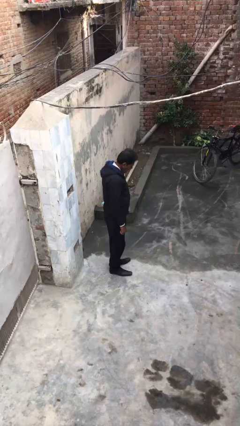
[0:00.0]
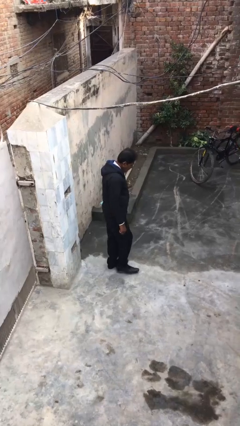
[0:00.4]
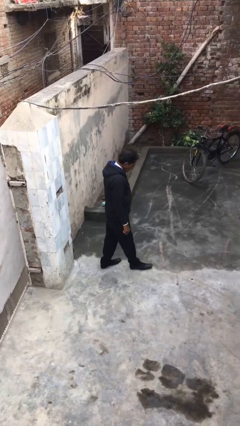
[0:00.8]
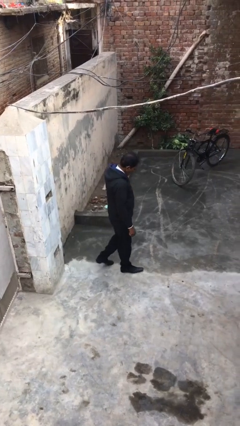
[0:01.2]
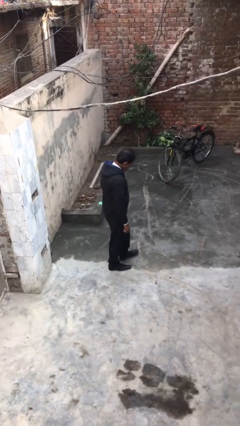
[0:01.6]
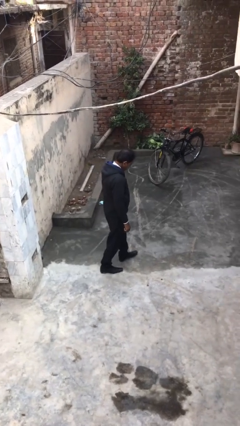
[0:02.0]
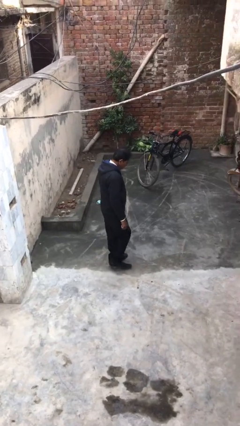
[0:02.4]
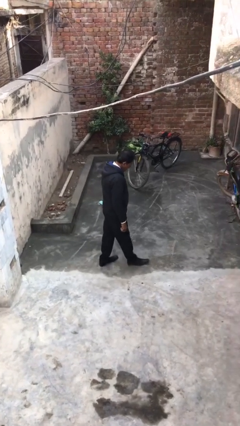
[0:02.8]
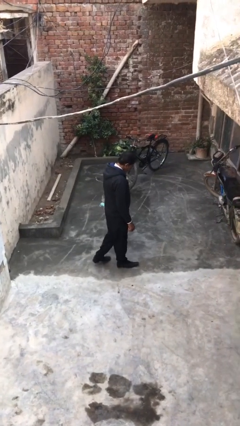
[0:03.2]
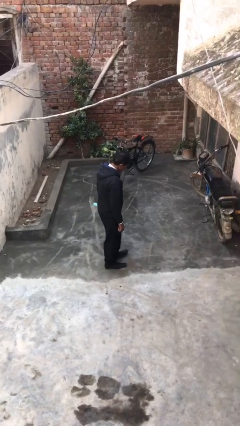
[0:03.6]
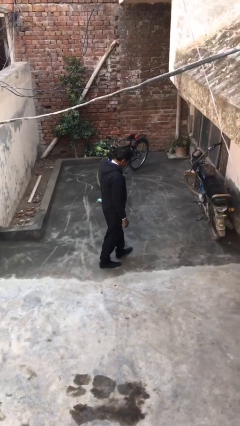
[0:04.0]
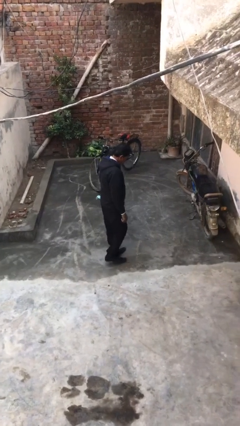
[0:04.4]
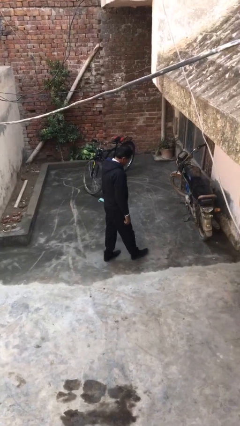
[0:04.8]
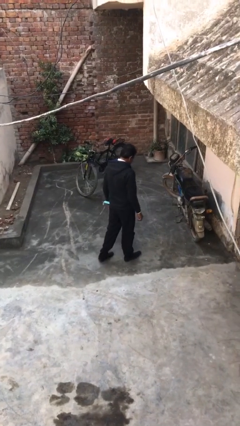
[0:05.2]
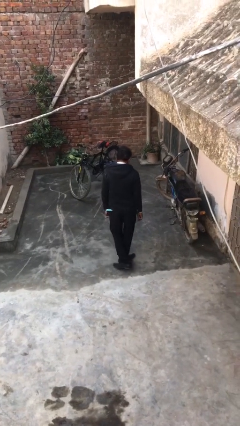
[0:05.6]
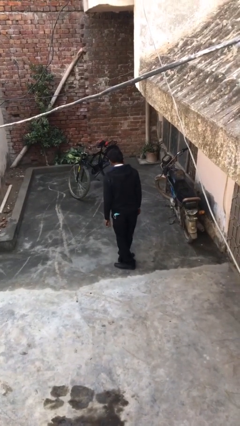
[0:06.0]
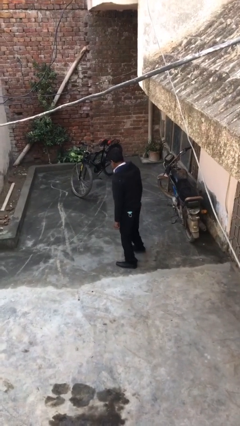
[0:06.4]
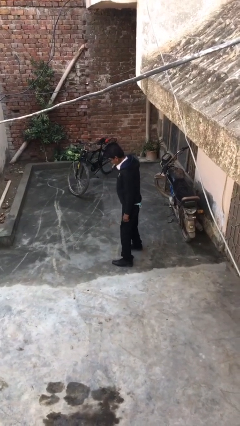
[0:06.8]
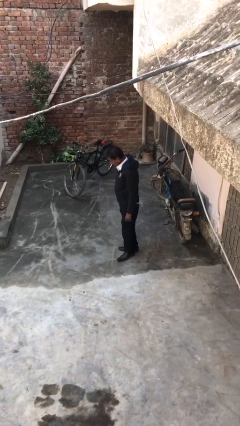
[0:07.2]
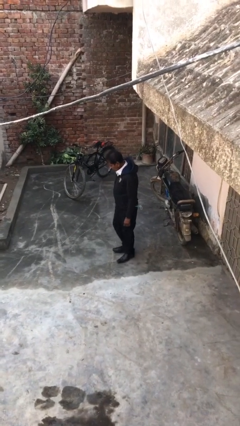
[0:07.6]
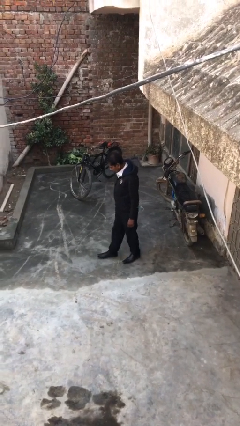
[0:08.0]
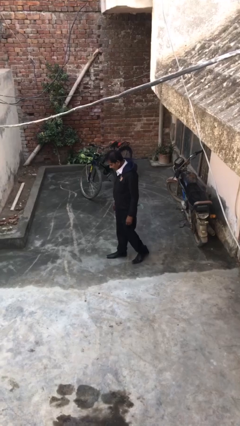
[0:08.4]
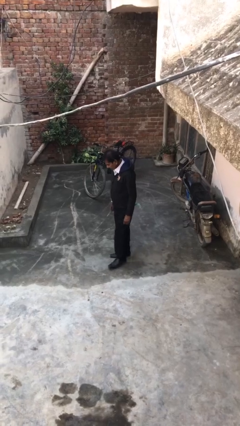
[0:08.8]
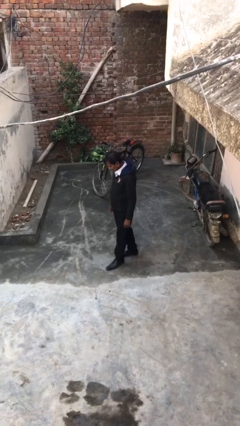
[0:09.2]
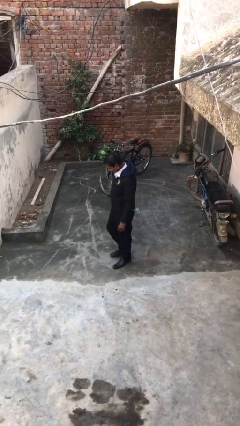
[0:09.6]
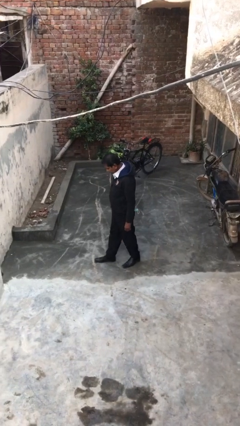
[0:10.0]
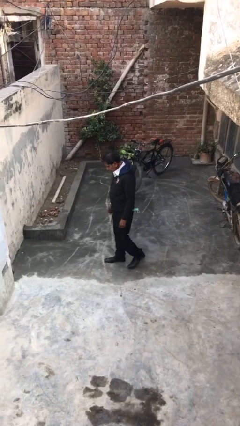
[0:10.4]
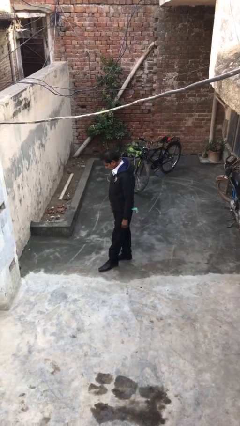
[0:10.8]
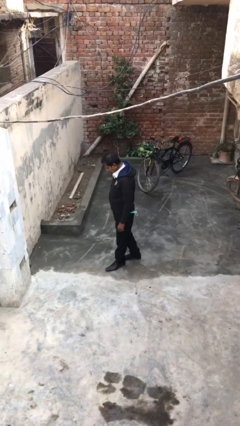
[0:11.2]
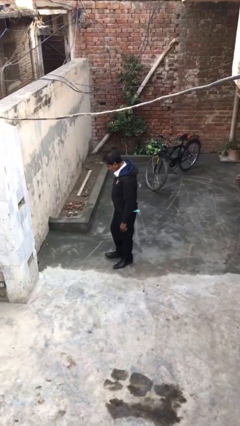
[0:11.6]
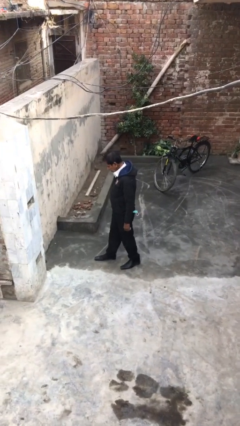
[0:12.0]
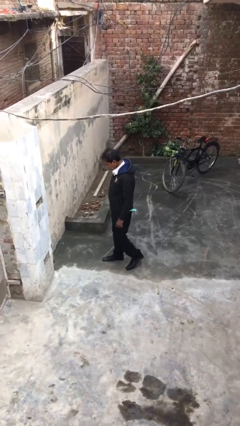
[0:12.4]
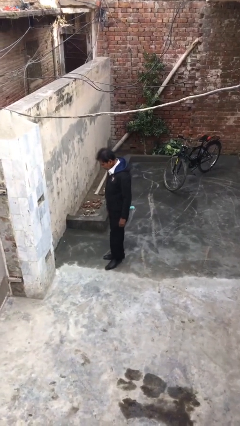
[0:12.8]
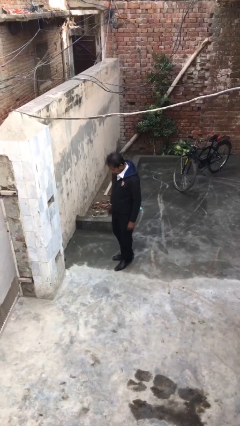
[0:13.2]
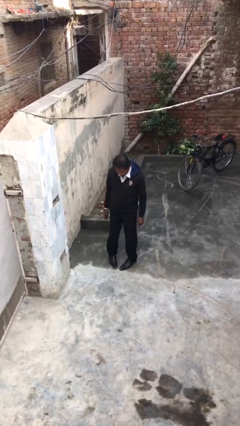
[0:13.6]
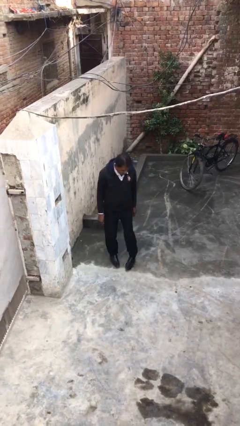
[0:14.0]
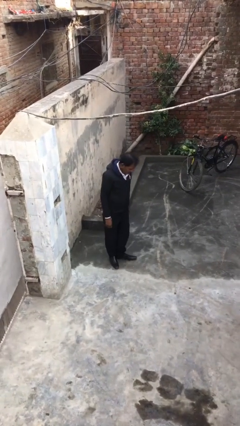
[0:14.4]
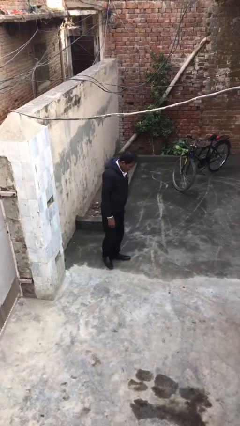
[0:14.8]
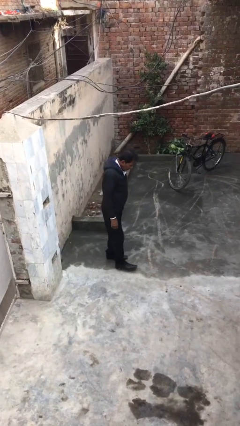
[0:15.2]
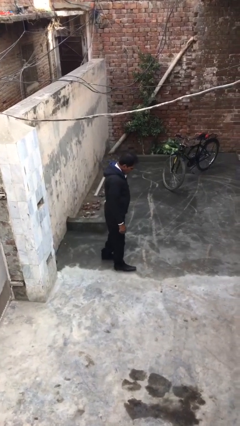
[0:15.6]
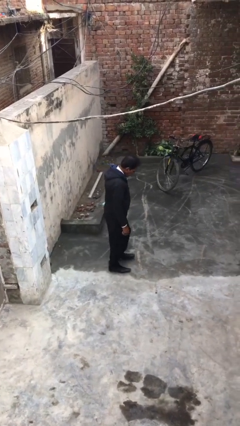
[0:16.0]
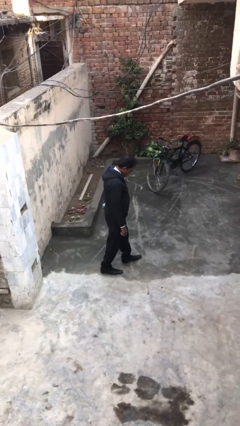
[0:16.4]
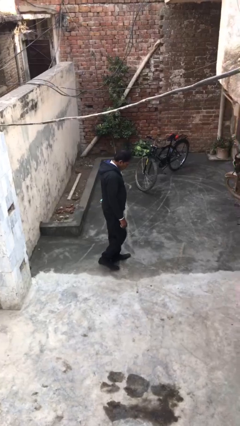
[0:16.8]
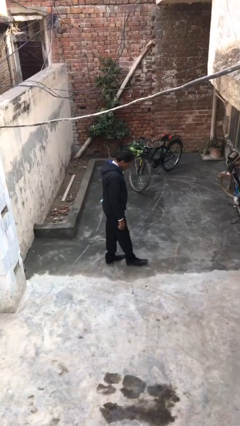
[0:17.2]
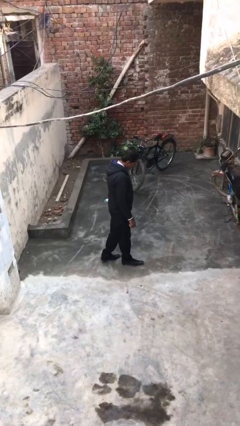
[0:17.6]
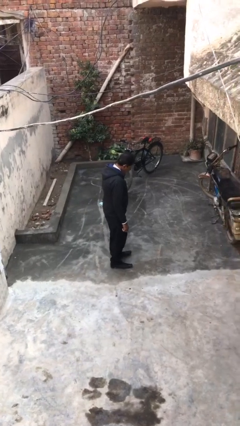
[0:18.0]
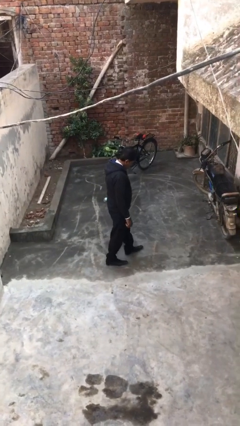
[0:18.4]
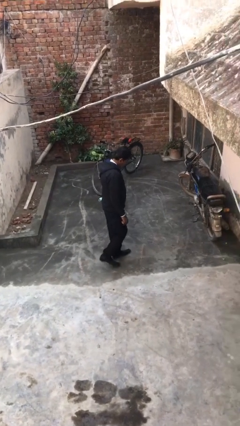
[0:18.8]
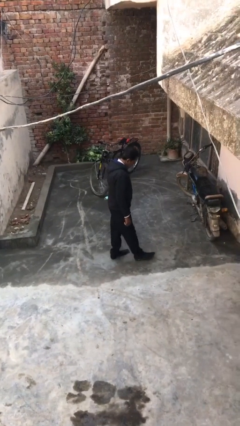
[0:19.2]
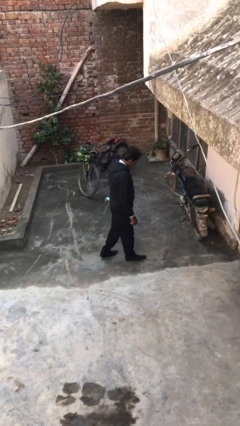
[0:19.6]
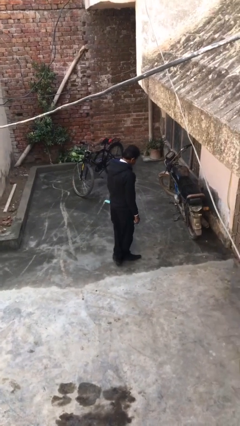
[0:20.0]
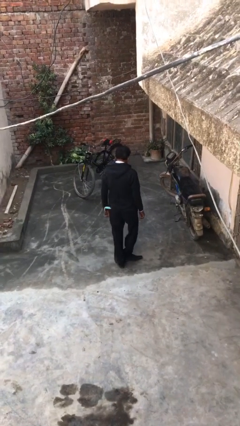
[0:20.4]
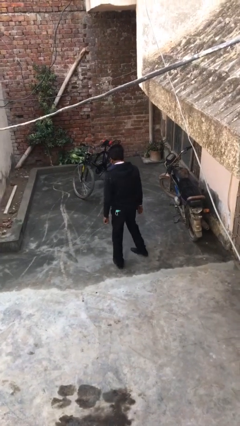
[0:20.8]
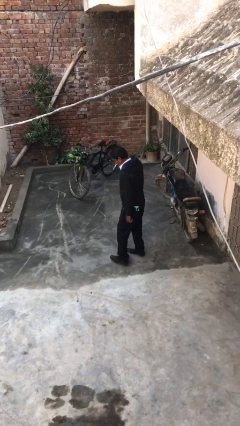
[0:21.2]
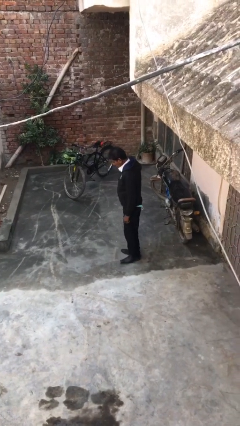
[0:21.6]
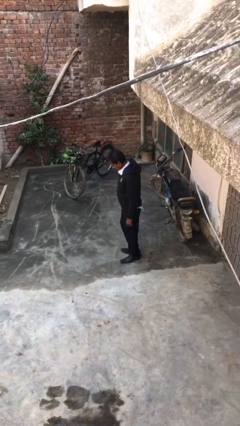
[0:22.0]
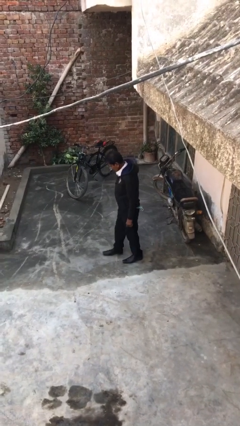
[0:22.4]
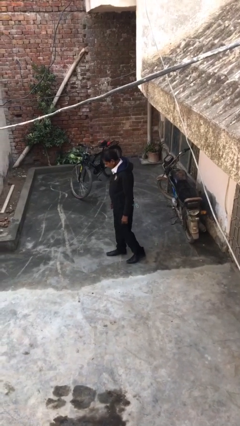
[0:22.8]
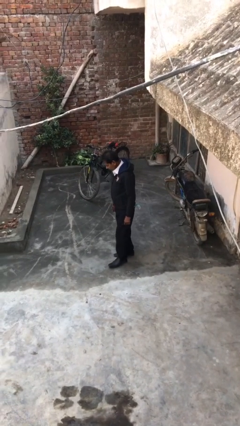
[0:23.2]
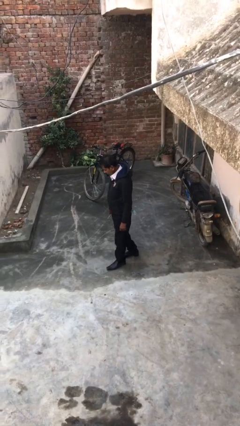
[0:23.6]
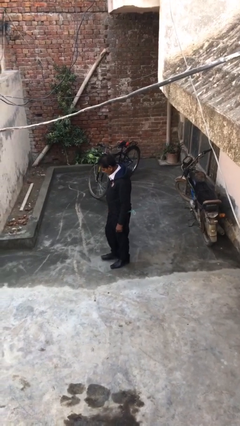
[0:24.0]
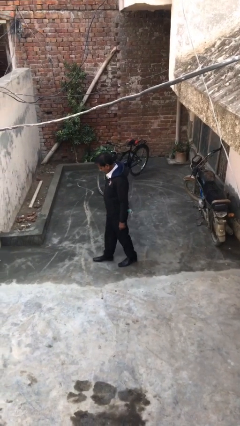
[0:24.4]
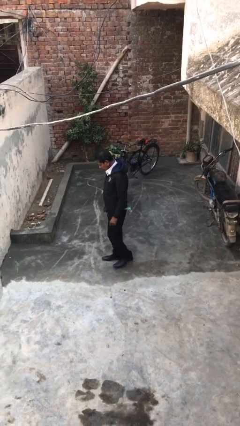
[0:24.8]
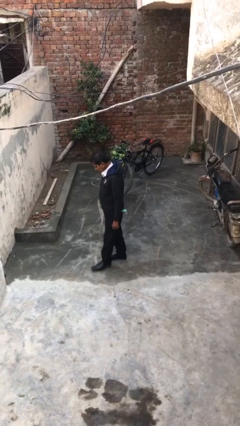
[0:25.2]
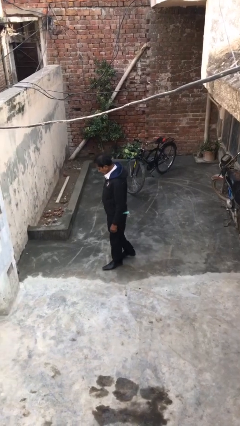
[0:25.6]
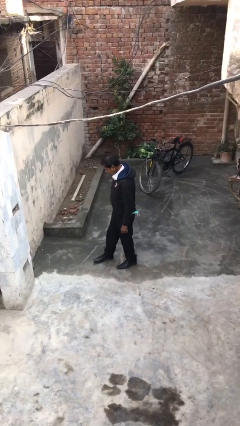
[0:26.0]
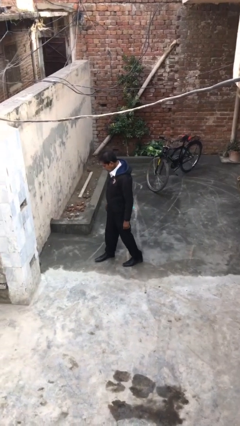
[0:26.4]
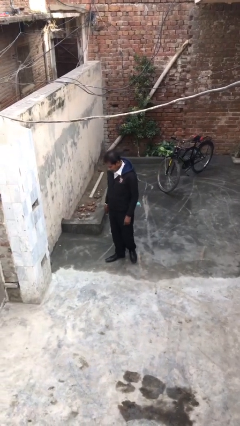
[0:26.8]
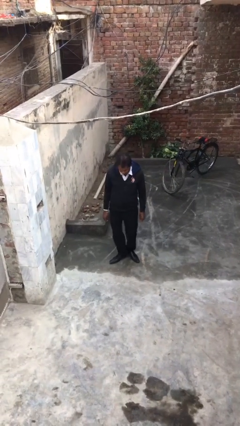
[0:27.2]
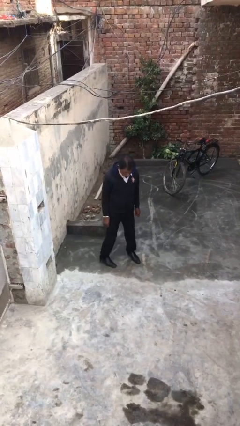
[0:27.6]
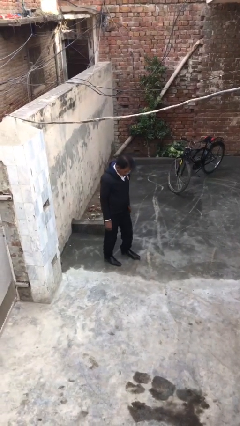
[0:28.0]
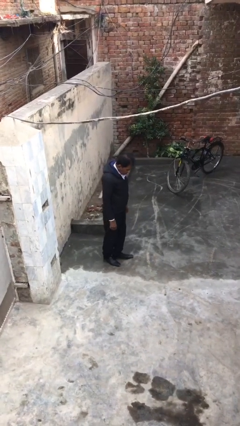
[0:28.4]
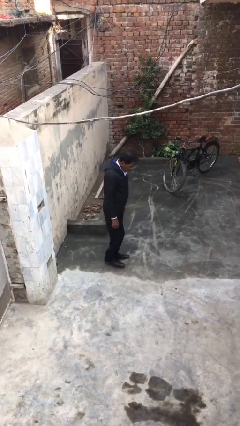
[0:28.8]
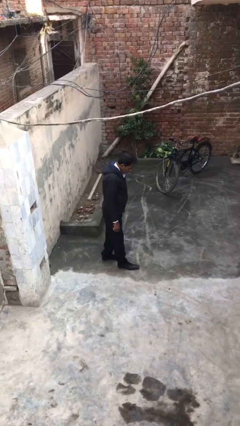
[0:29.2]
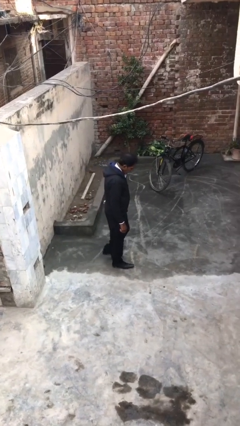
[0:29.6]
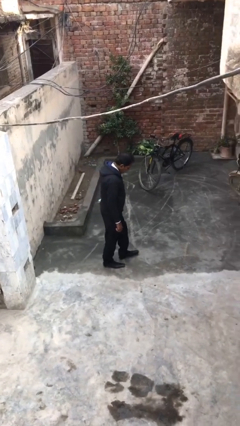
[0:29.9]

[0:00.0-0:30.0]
person walks

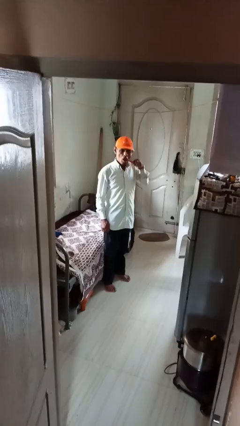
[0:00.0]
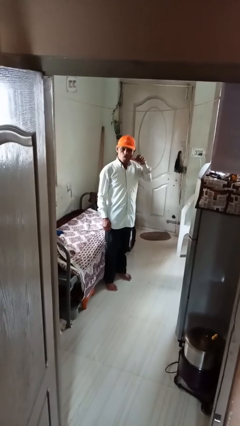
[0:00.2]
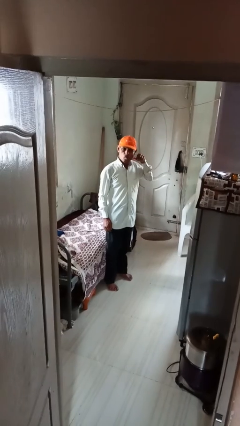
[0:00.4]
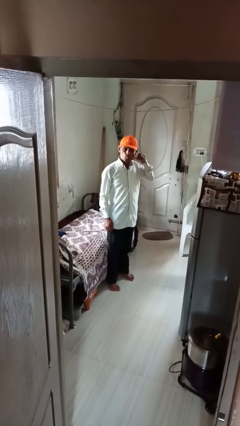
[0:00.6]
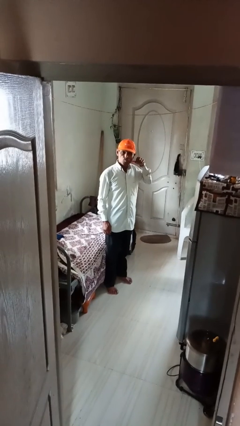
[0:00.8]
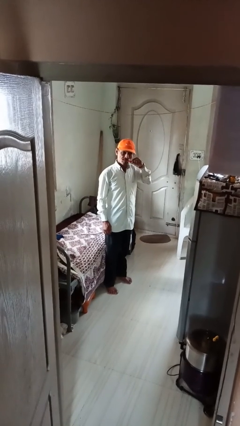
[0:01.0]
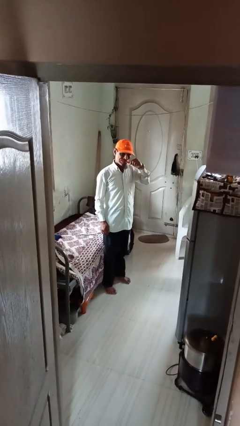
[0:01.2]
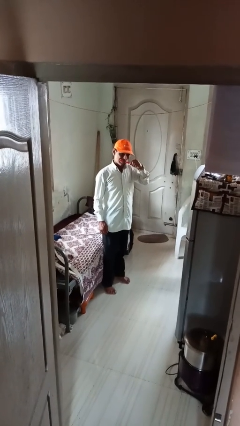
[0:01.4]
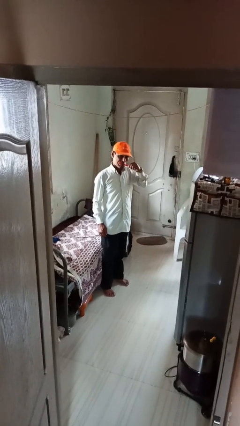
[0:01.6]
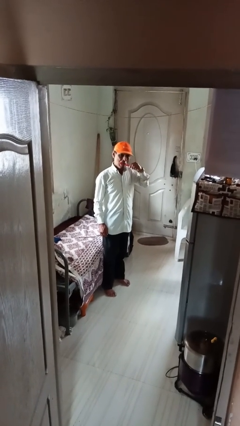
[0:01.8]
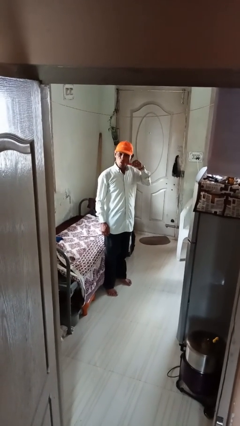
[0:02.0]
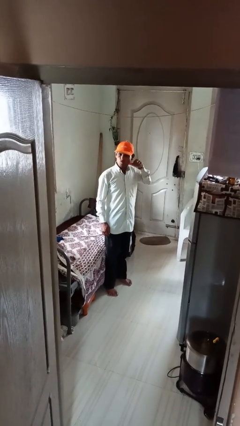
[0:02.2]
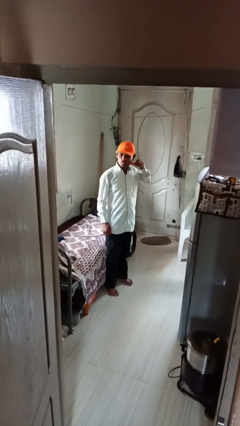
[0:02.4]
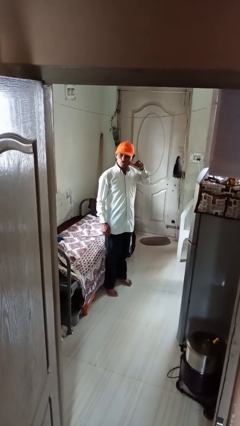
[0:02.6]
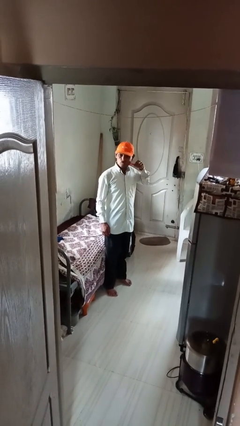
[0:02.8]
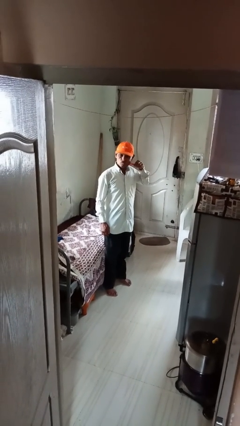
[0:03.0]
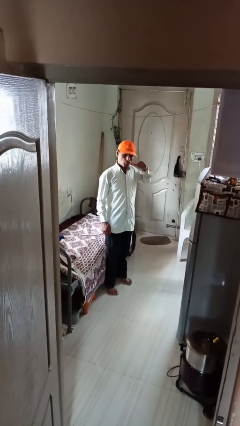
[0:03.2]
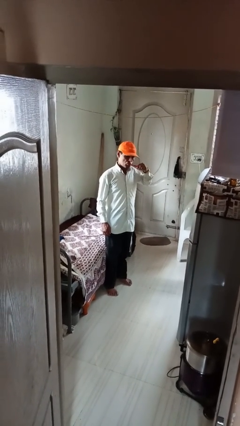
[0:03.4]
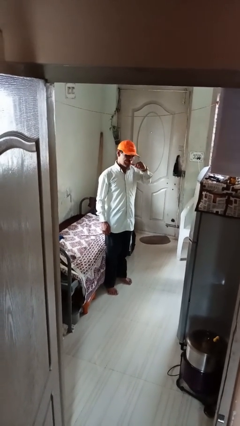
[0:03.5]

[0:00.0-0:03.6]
person brushes teeth
